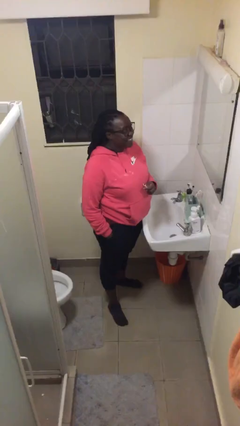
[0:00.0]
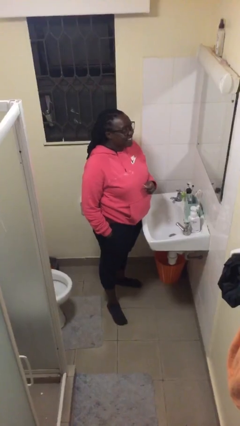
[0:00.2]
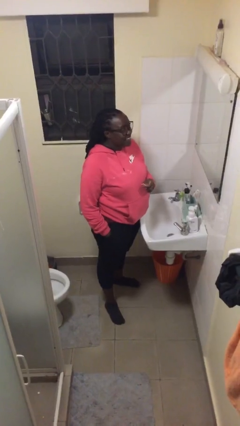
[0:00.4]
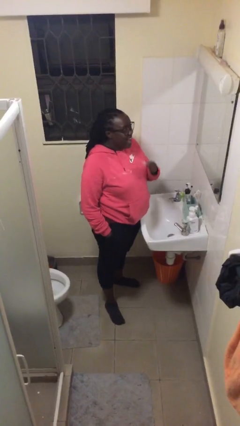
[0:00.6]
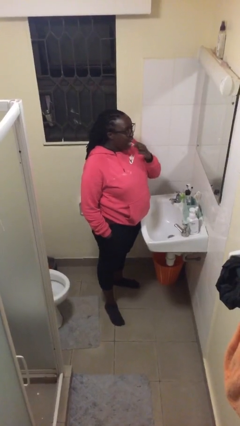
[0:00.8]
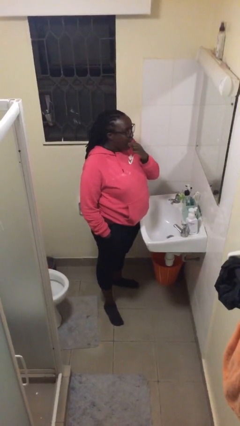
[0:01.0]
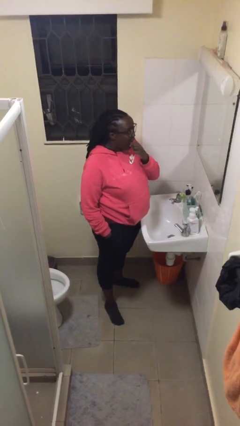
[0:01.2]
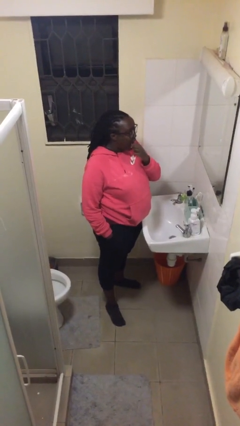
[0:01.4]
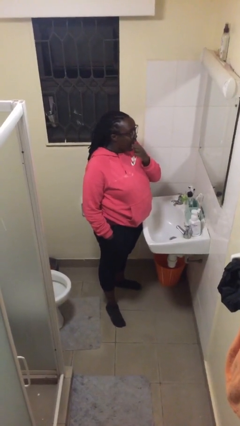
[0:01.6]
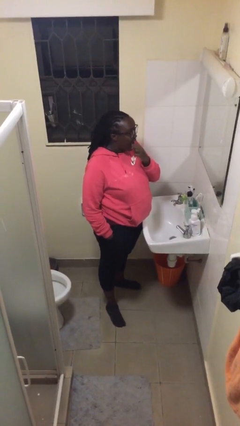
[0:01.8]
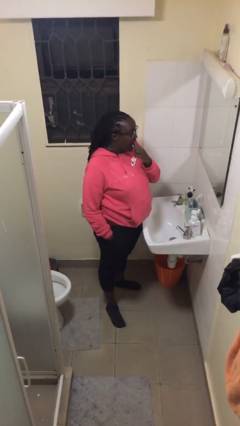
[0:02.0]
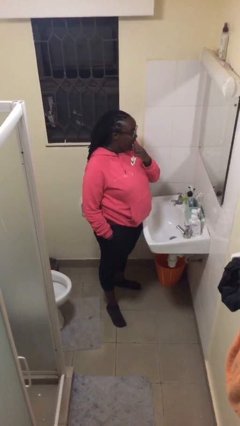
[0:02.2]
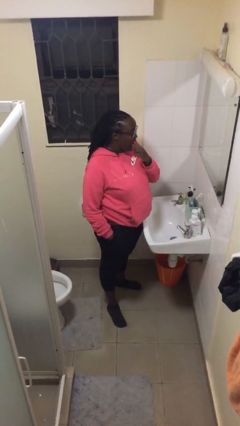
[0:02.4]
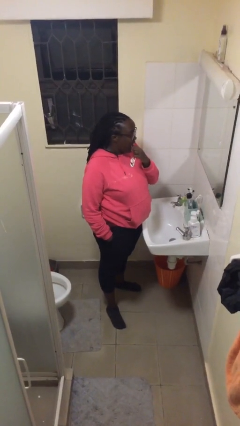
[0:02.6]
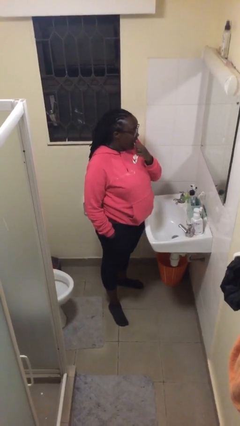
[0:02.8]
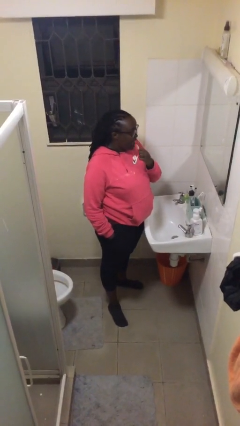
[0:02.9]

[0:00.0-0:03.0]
person flosses

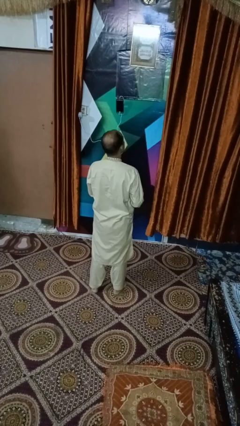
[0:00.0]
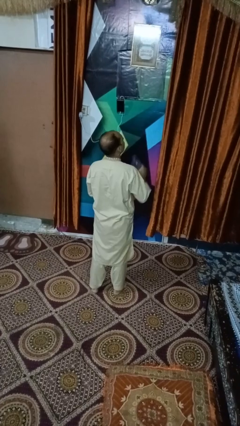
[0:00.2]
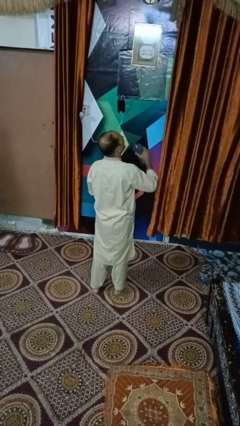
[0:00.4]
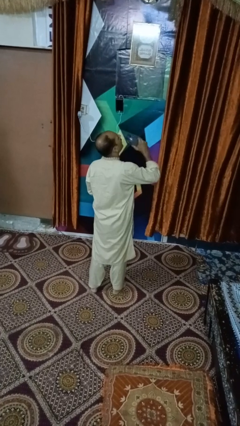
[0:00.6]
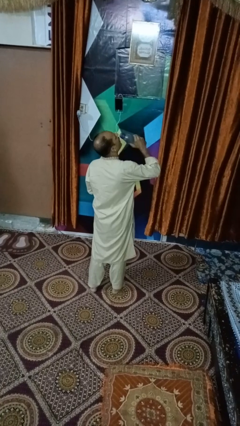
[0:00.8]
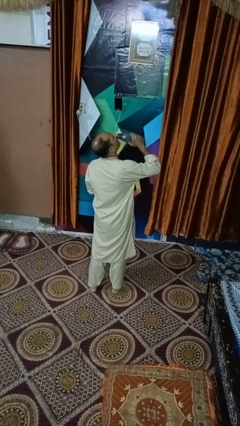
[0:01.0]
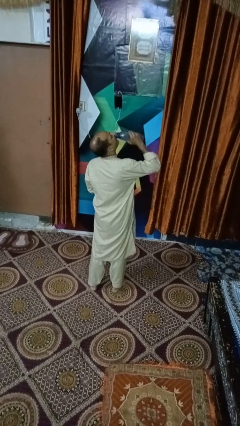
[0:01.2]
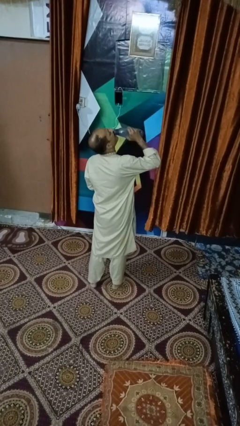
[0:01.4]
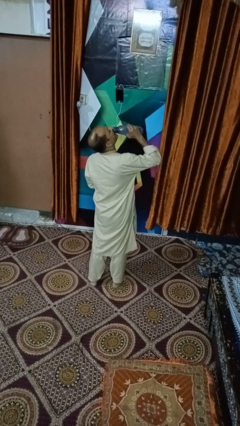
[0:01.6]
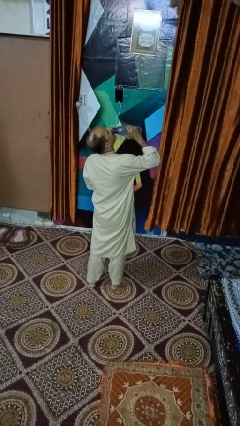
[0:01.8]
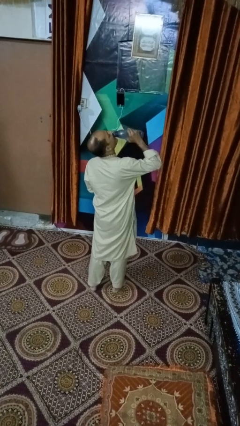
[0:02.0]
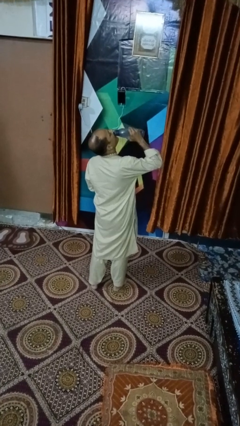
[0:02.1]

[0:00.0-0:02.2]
person drinks from bottle

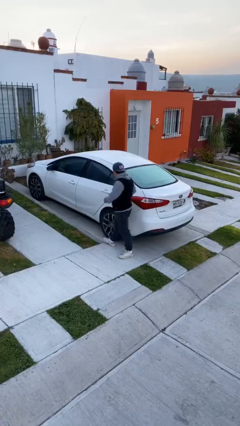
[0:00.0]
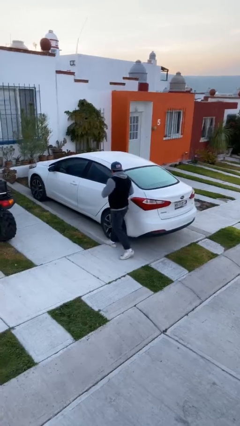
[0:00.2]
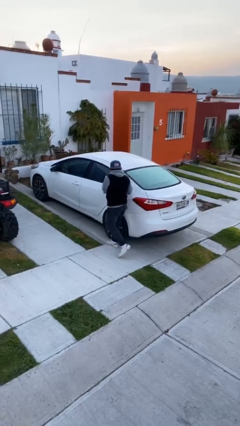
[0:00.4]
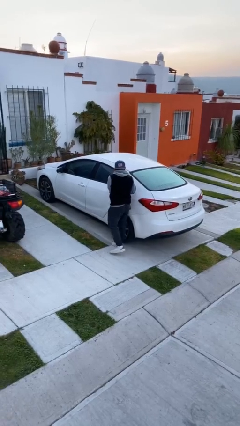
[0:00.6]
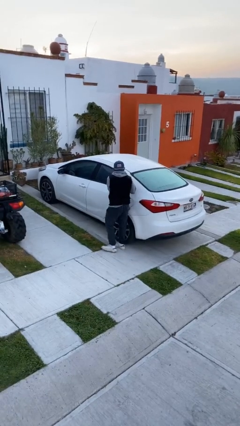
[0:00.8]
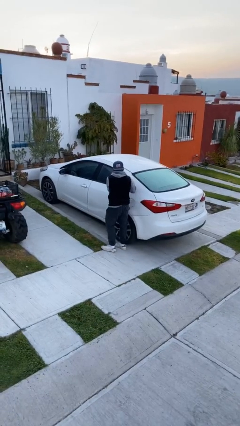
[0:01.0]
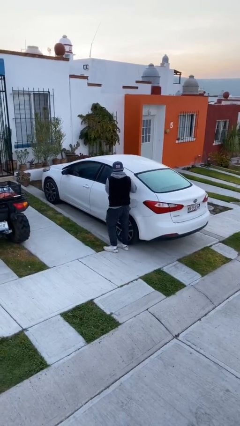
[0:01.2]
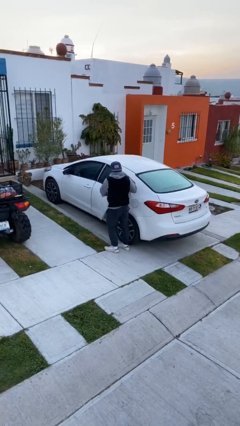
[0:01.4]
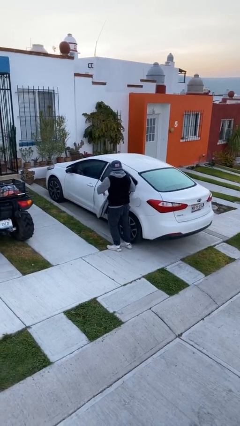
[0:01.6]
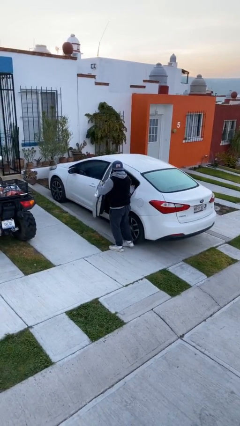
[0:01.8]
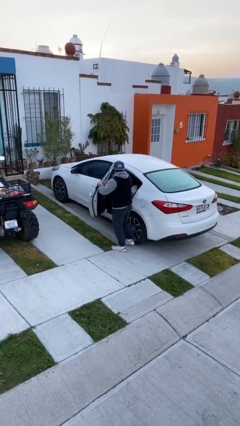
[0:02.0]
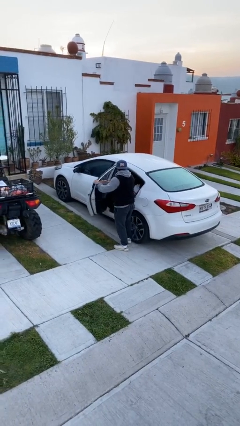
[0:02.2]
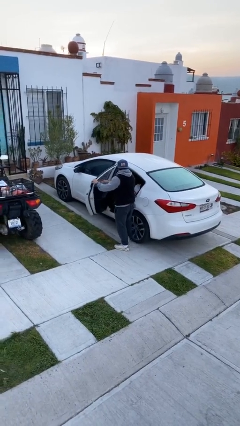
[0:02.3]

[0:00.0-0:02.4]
person opens car door

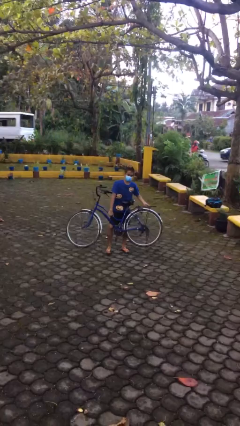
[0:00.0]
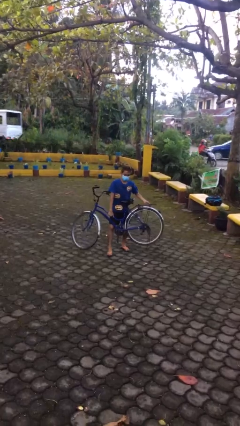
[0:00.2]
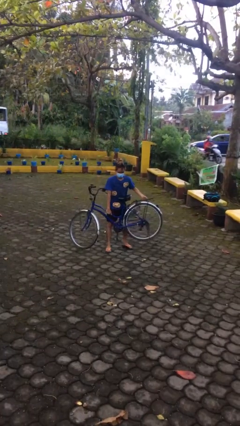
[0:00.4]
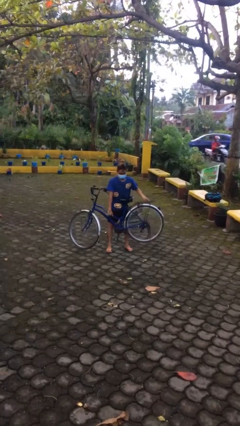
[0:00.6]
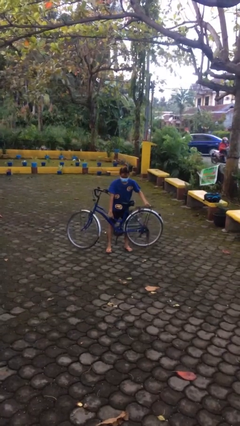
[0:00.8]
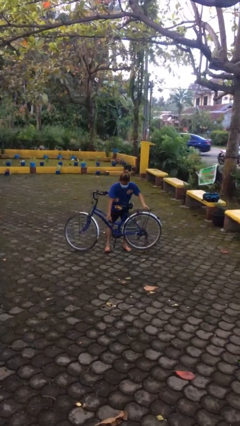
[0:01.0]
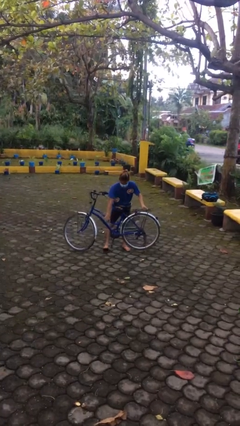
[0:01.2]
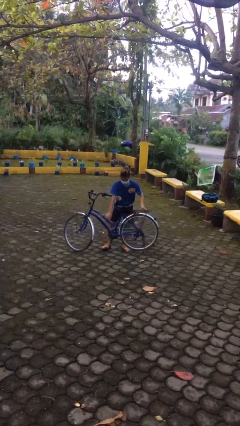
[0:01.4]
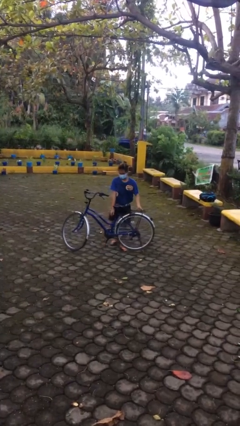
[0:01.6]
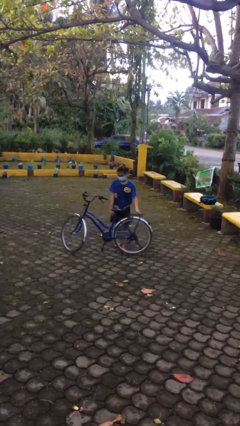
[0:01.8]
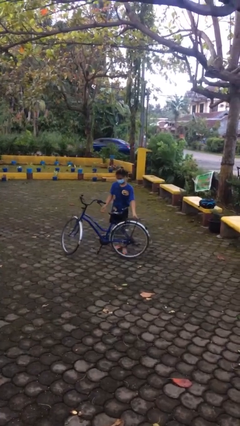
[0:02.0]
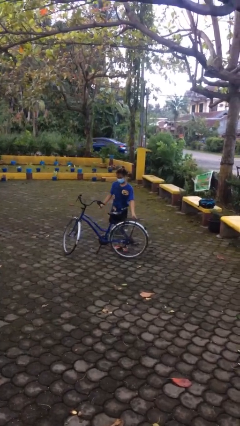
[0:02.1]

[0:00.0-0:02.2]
person puts down object on floor

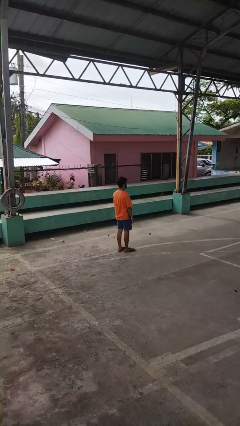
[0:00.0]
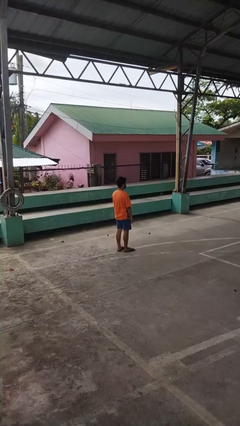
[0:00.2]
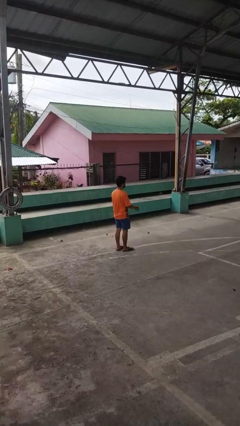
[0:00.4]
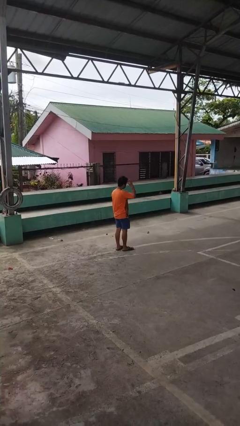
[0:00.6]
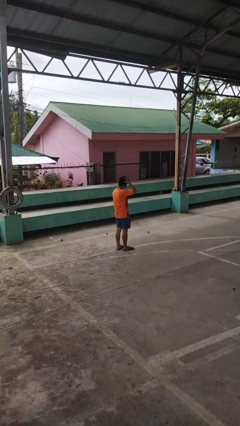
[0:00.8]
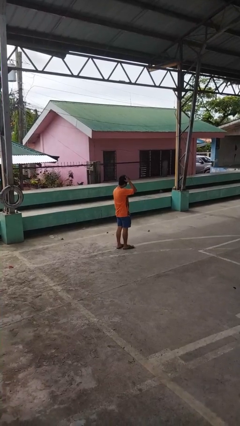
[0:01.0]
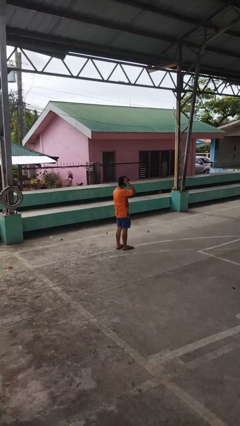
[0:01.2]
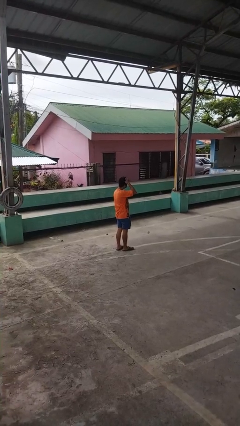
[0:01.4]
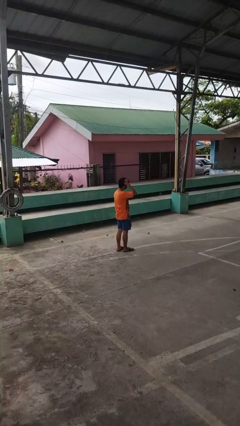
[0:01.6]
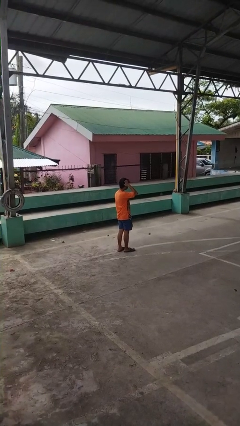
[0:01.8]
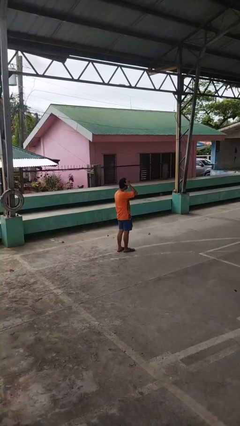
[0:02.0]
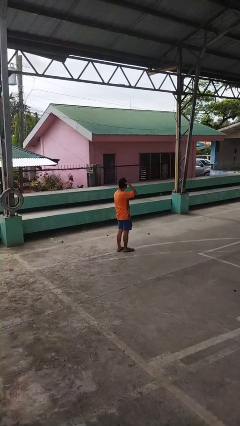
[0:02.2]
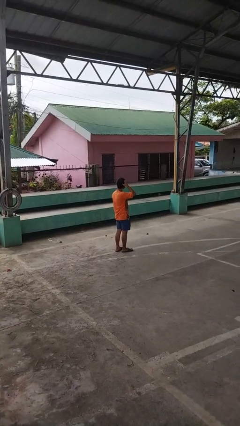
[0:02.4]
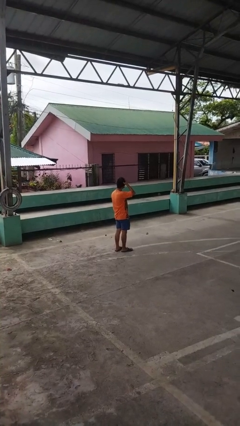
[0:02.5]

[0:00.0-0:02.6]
person scratches face

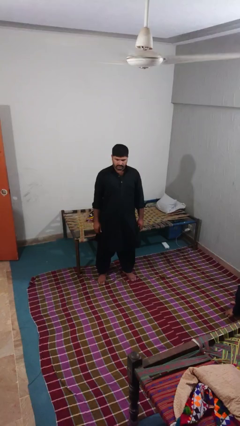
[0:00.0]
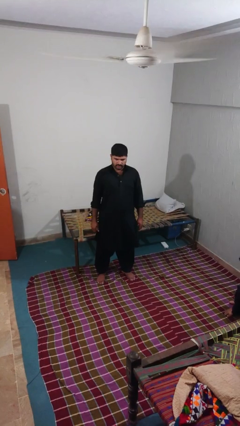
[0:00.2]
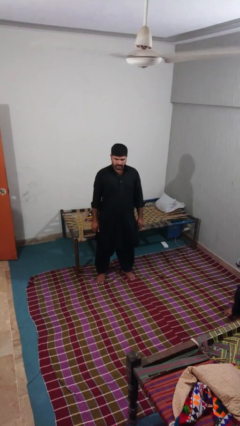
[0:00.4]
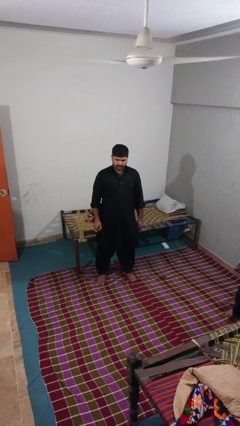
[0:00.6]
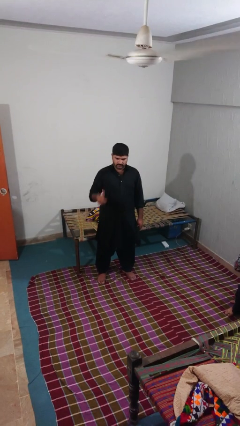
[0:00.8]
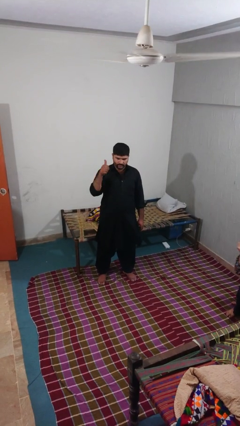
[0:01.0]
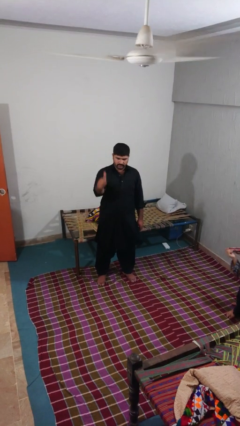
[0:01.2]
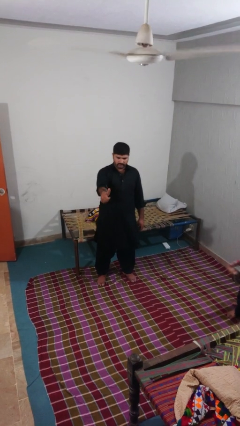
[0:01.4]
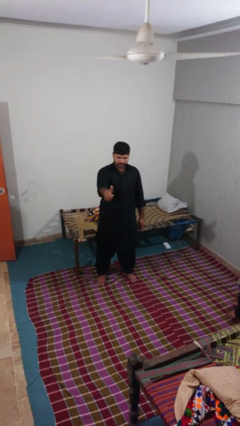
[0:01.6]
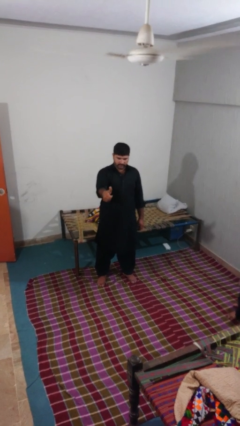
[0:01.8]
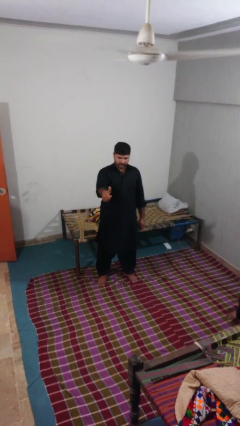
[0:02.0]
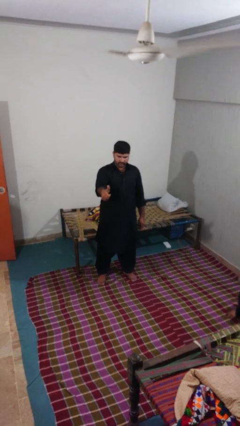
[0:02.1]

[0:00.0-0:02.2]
person gestures thumbs up

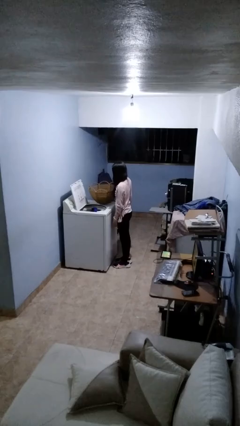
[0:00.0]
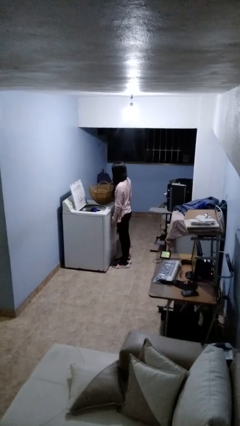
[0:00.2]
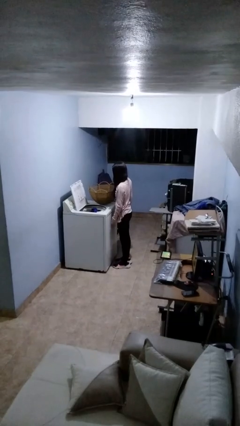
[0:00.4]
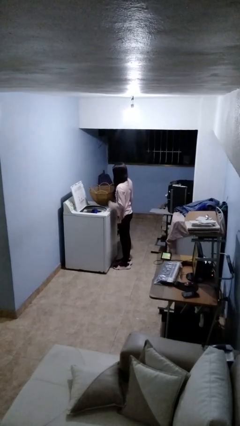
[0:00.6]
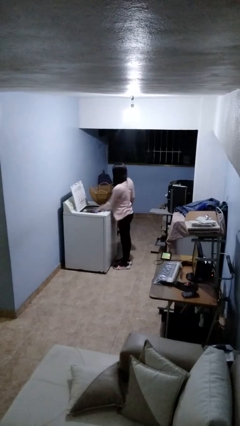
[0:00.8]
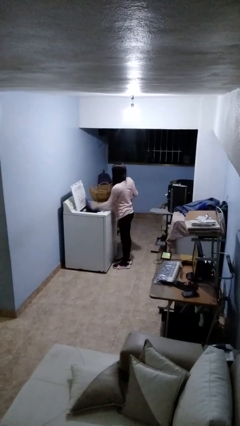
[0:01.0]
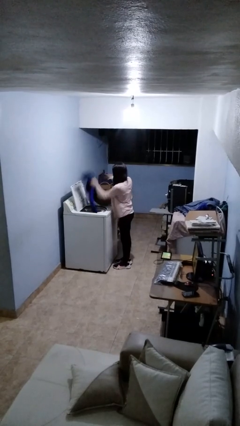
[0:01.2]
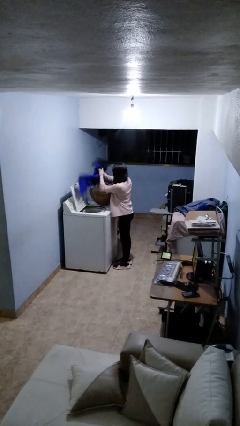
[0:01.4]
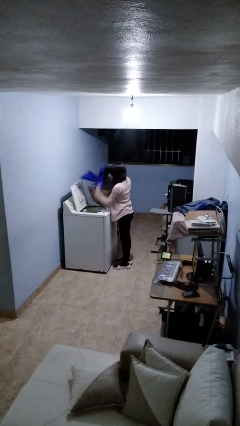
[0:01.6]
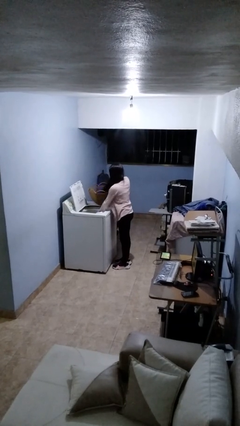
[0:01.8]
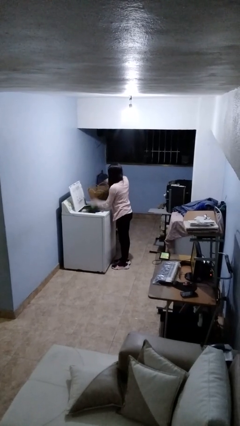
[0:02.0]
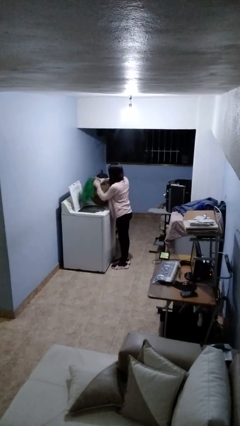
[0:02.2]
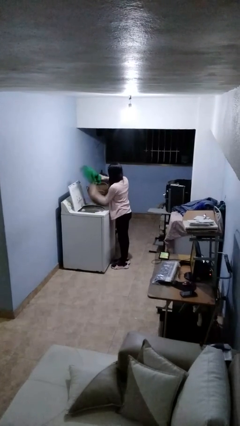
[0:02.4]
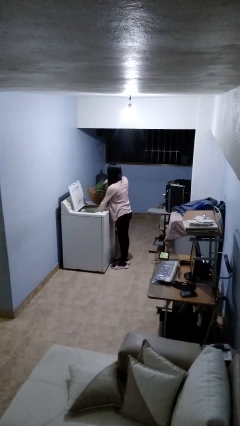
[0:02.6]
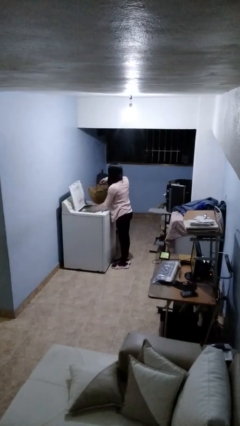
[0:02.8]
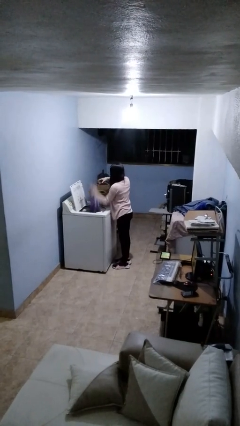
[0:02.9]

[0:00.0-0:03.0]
person loads clotheswasher
